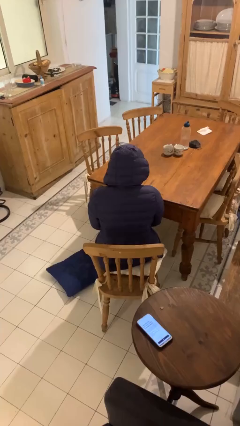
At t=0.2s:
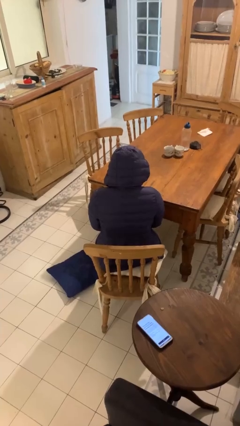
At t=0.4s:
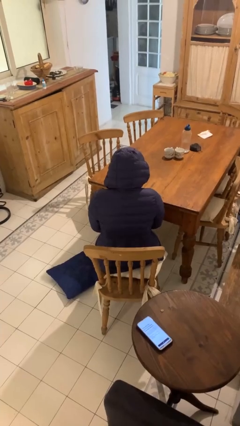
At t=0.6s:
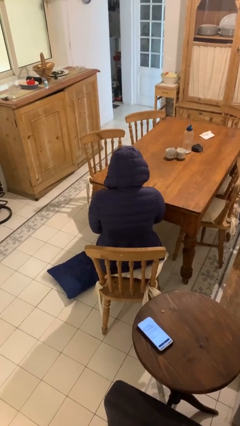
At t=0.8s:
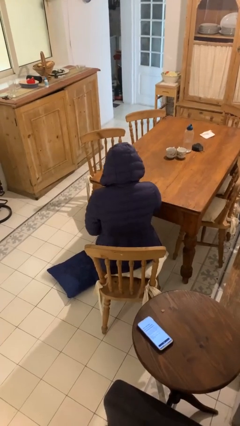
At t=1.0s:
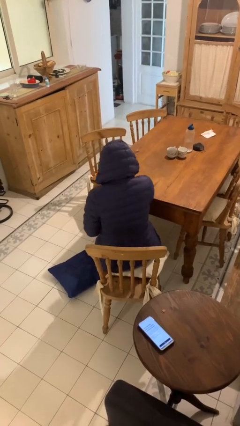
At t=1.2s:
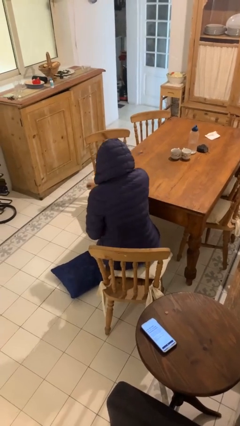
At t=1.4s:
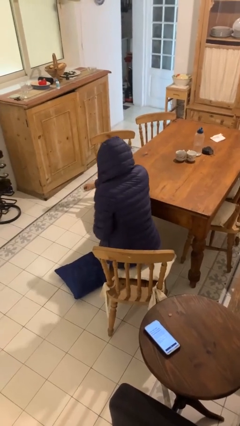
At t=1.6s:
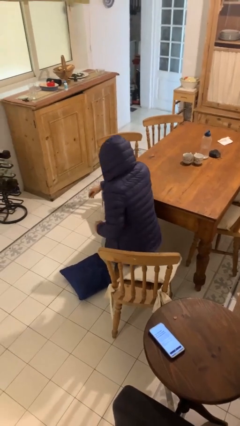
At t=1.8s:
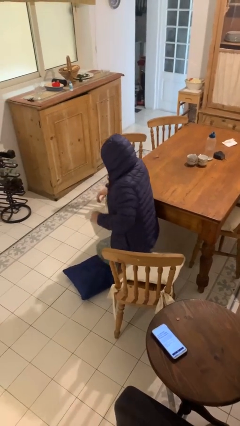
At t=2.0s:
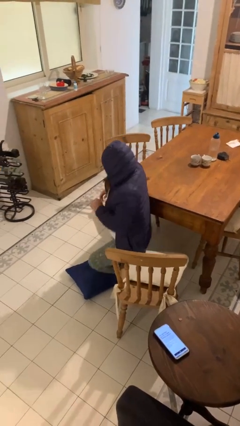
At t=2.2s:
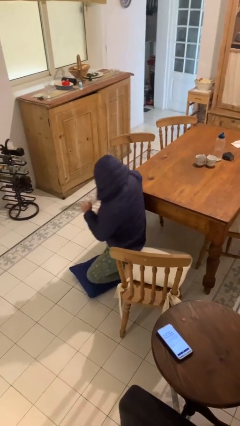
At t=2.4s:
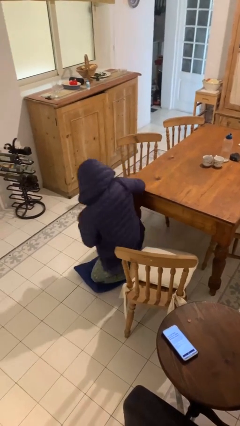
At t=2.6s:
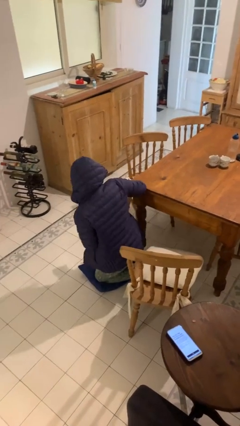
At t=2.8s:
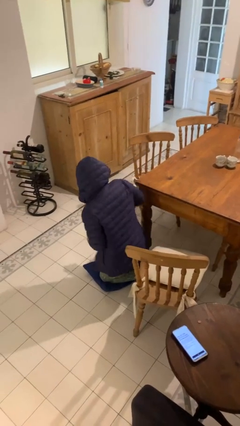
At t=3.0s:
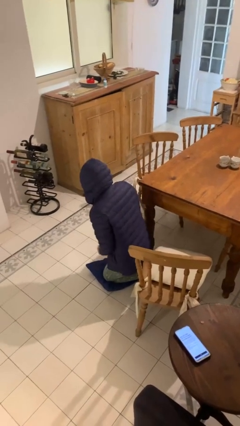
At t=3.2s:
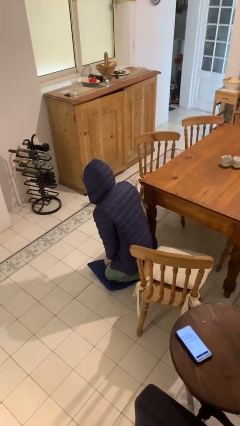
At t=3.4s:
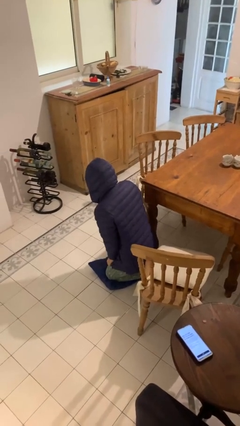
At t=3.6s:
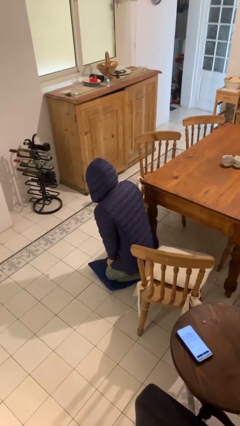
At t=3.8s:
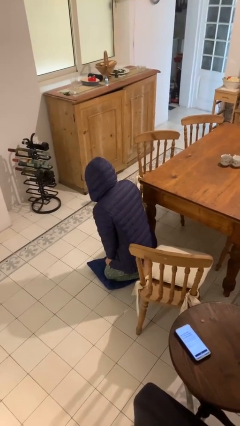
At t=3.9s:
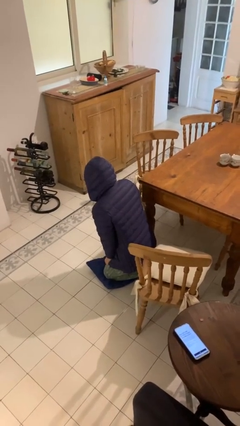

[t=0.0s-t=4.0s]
person stands up from floor

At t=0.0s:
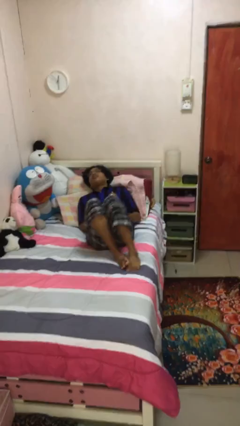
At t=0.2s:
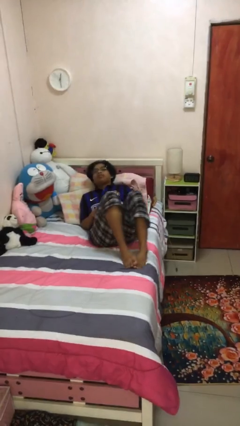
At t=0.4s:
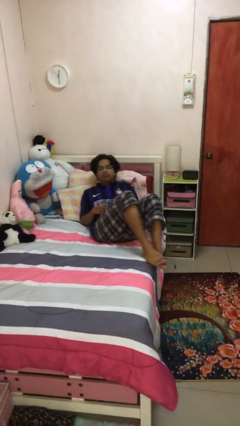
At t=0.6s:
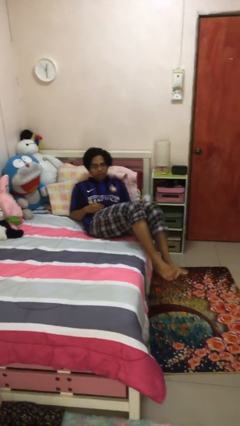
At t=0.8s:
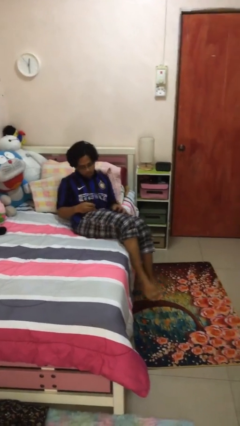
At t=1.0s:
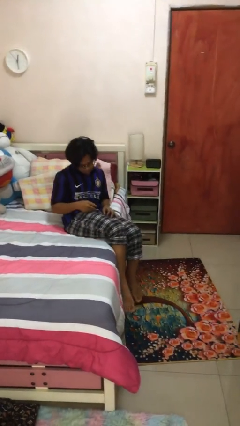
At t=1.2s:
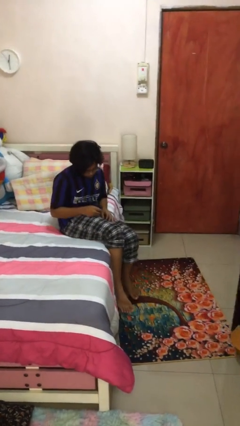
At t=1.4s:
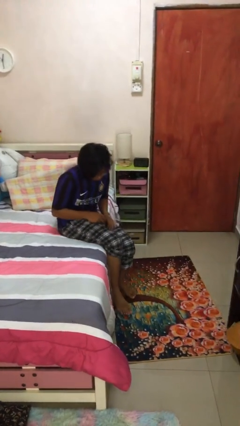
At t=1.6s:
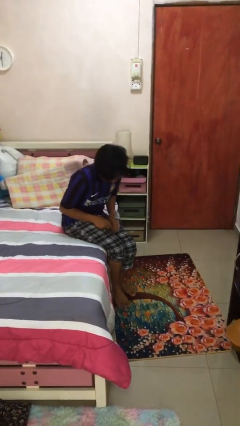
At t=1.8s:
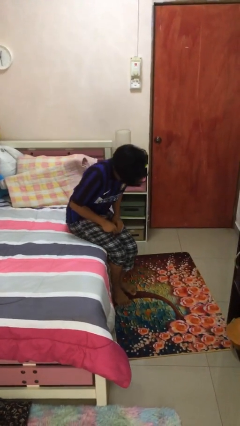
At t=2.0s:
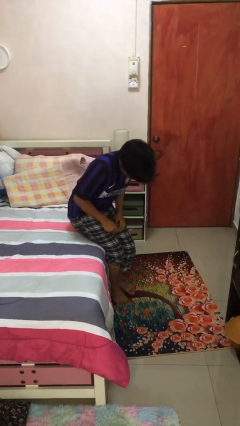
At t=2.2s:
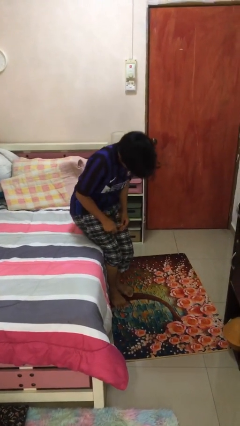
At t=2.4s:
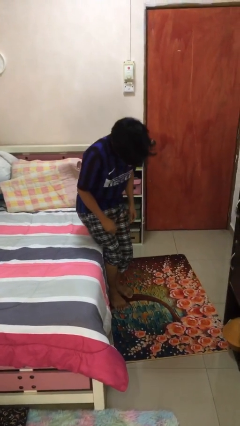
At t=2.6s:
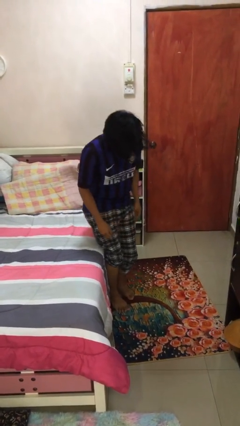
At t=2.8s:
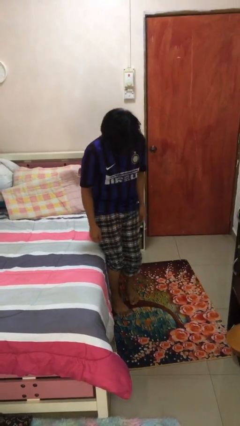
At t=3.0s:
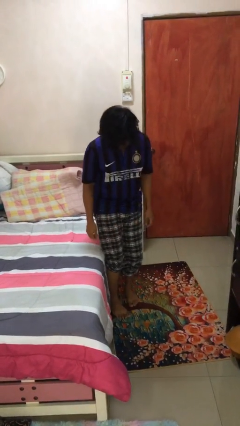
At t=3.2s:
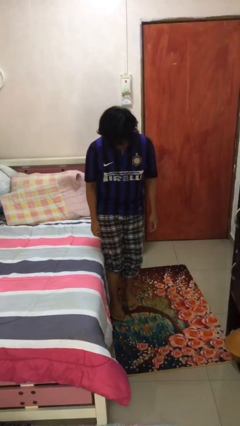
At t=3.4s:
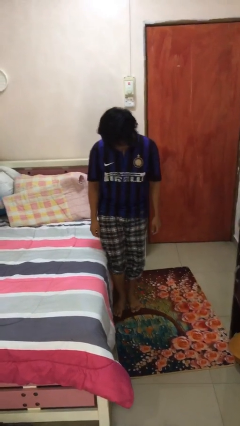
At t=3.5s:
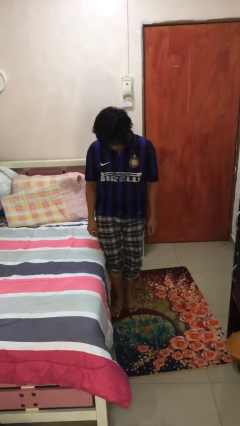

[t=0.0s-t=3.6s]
person stands up

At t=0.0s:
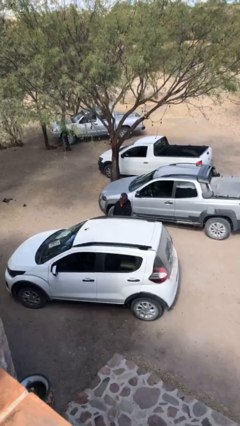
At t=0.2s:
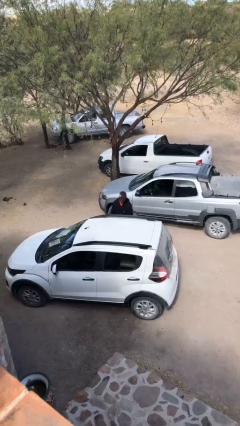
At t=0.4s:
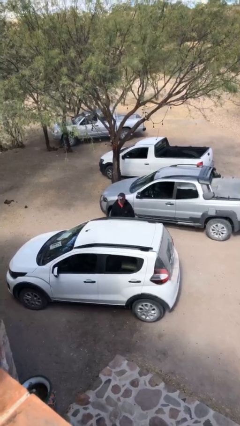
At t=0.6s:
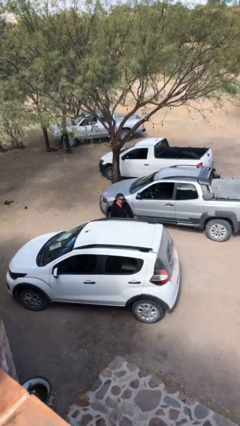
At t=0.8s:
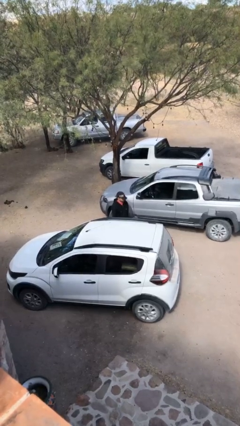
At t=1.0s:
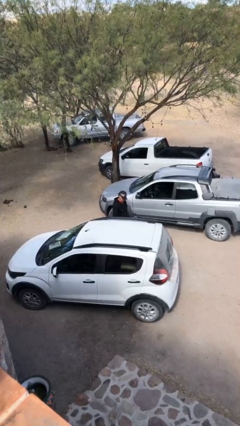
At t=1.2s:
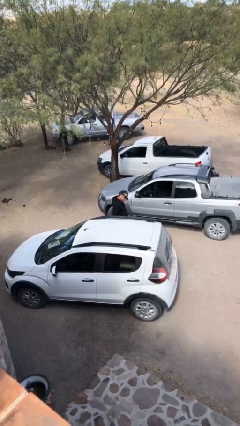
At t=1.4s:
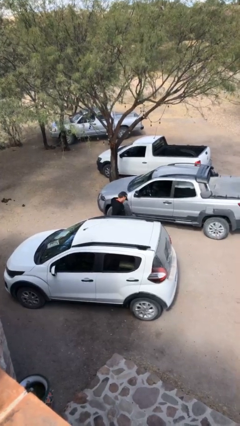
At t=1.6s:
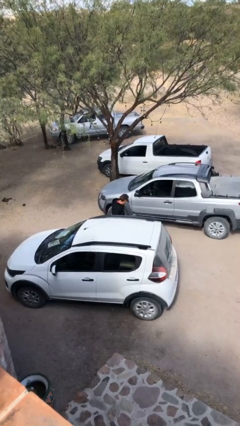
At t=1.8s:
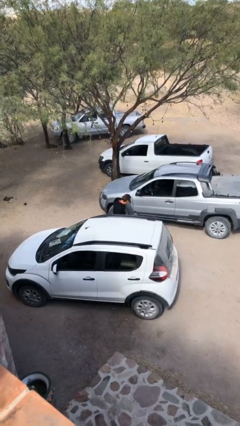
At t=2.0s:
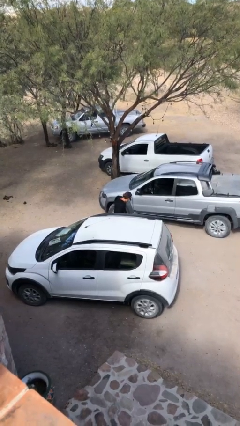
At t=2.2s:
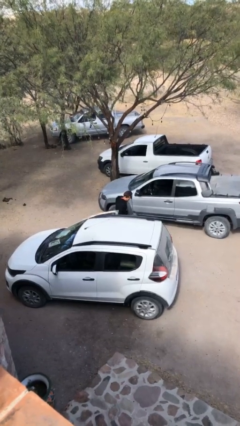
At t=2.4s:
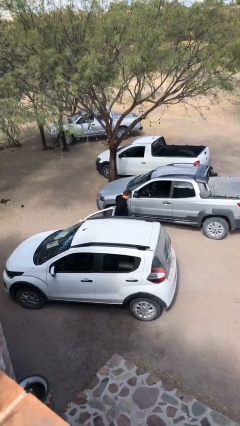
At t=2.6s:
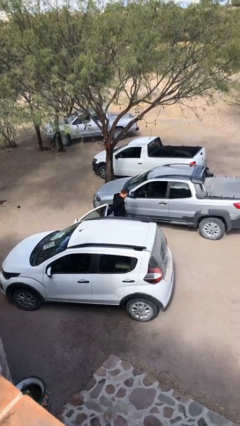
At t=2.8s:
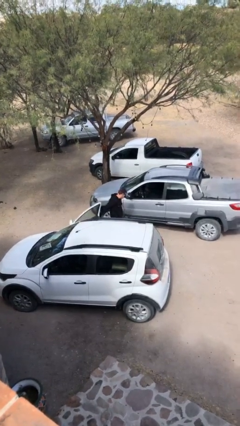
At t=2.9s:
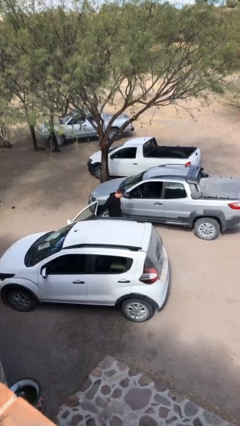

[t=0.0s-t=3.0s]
person opens car door

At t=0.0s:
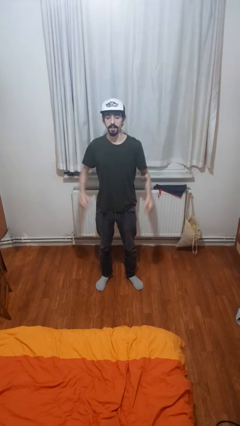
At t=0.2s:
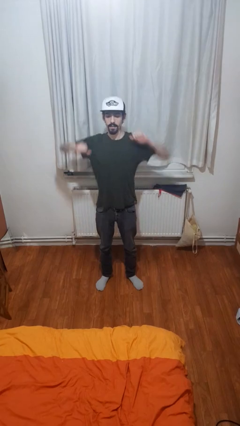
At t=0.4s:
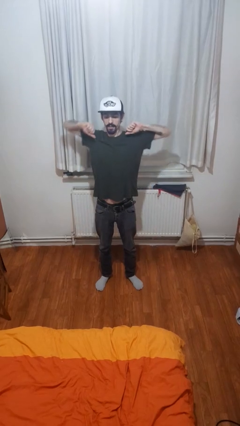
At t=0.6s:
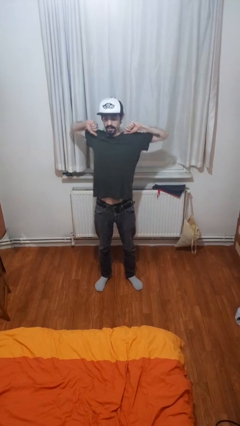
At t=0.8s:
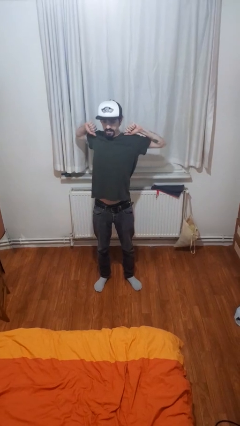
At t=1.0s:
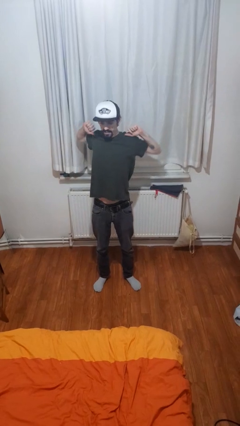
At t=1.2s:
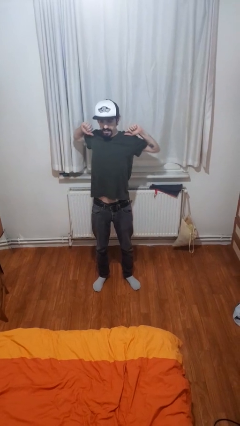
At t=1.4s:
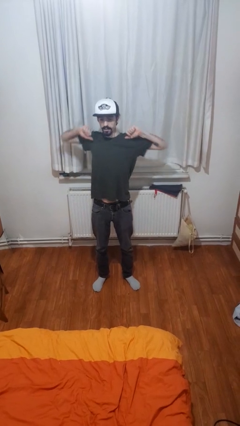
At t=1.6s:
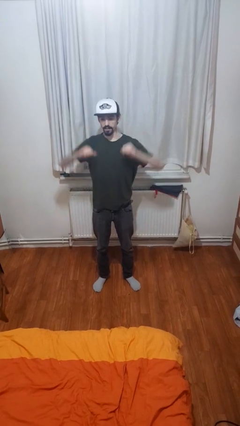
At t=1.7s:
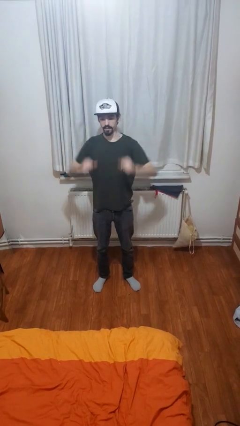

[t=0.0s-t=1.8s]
person stretches arms to side

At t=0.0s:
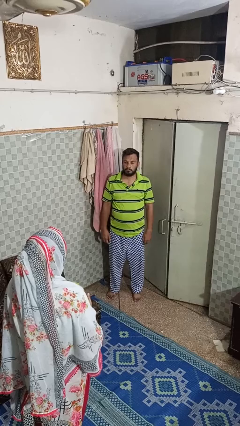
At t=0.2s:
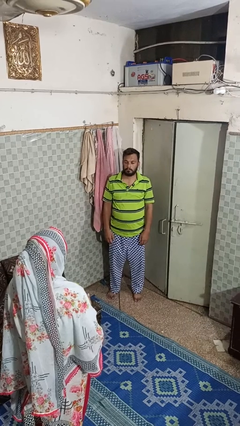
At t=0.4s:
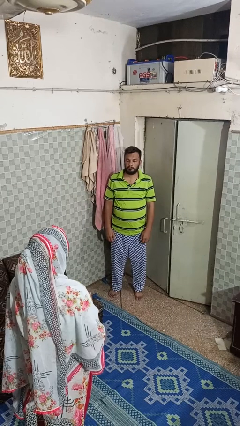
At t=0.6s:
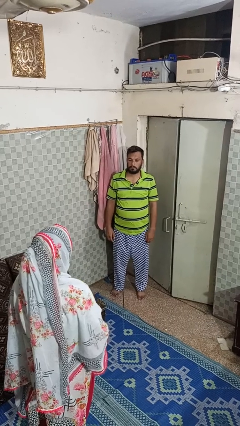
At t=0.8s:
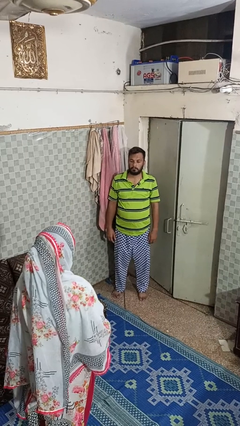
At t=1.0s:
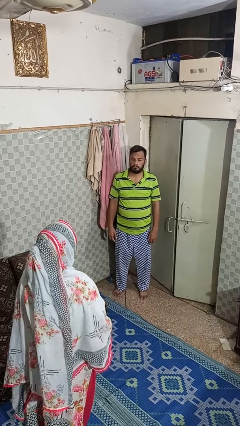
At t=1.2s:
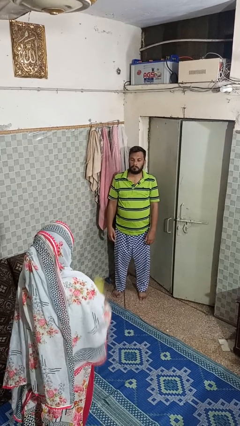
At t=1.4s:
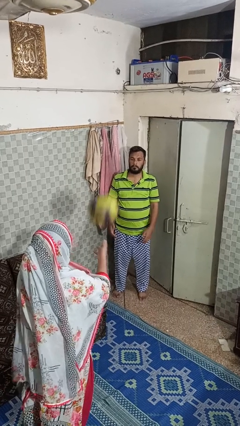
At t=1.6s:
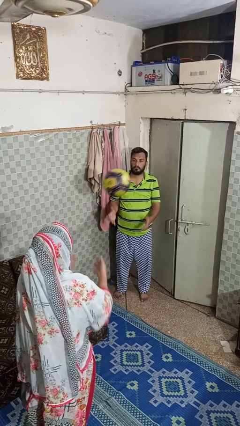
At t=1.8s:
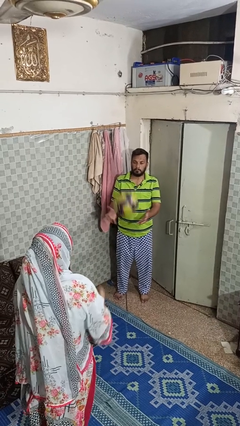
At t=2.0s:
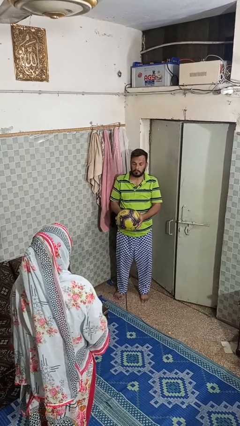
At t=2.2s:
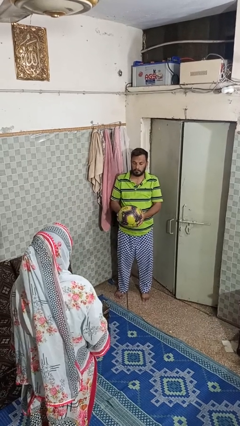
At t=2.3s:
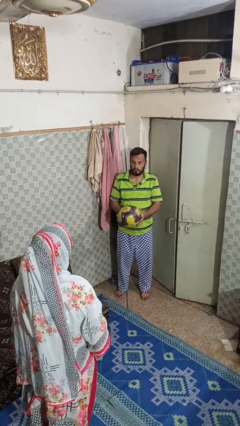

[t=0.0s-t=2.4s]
person catches object from person

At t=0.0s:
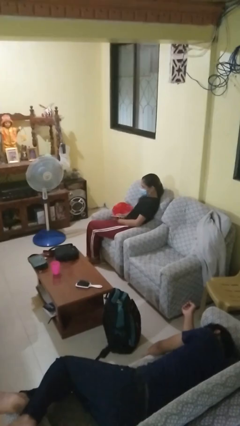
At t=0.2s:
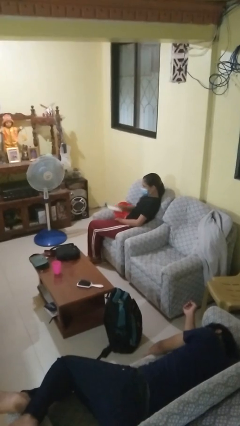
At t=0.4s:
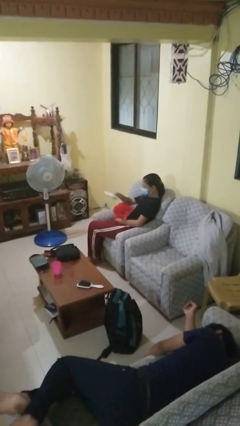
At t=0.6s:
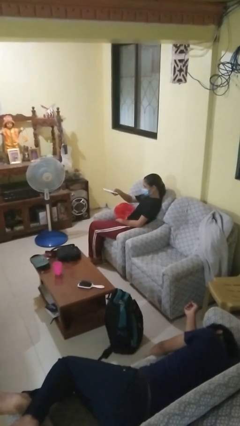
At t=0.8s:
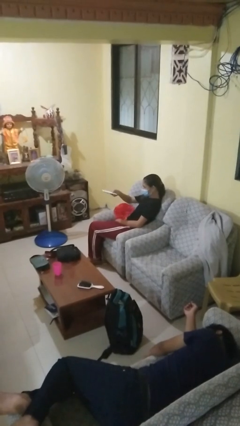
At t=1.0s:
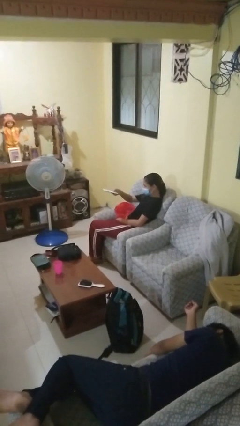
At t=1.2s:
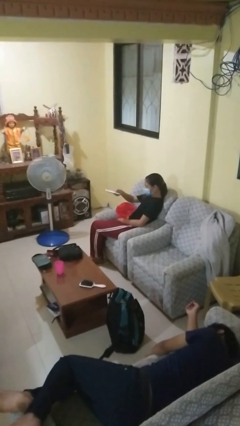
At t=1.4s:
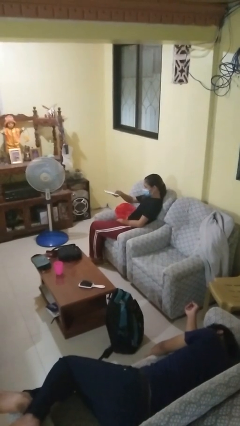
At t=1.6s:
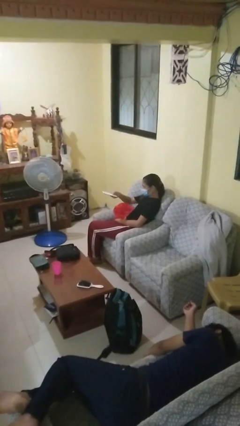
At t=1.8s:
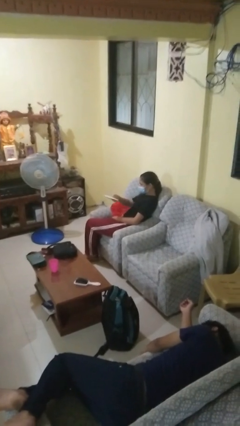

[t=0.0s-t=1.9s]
person uses television remote

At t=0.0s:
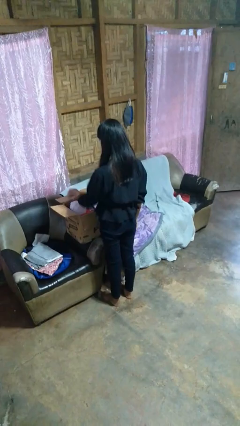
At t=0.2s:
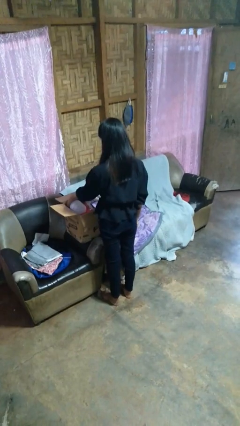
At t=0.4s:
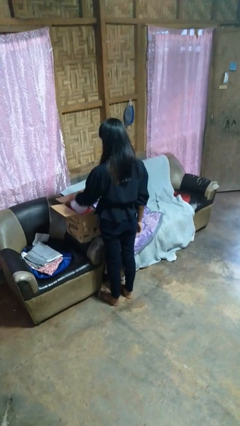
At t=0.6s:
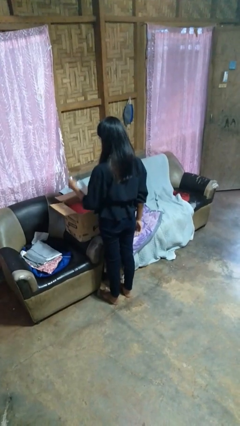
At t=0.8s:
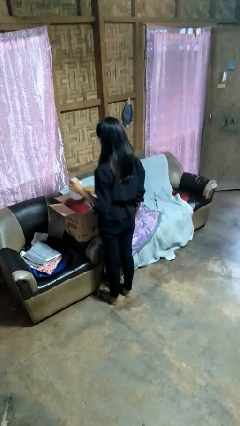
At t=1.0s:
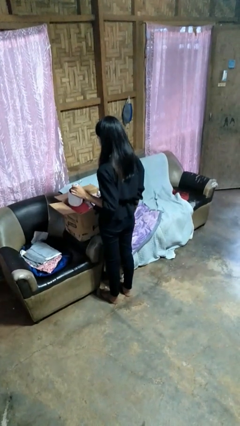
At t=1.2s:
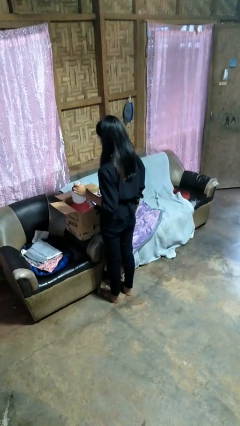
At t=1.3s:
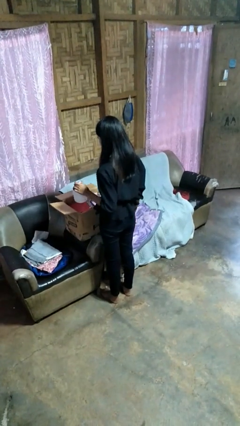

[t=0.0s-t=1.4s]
person takes object from box
